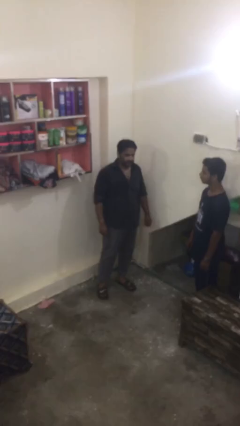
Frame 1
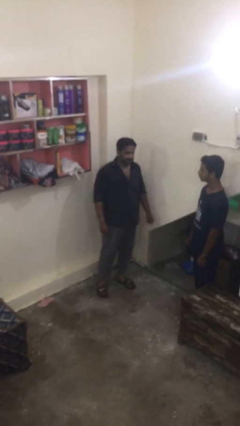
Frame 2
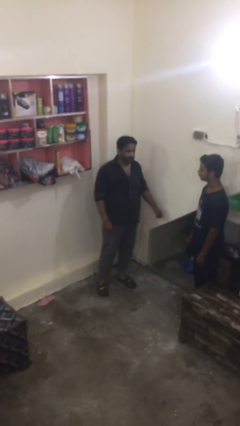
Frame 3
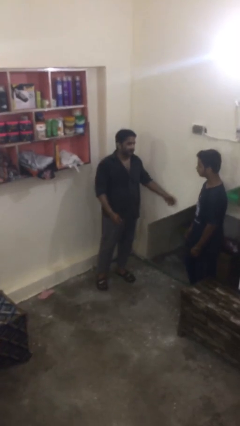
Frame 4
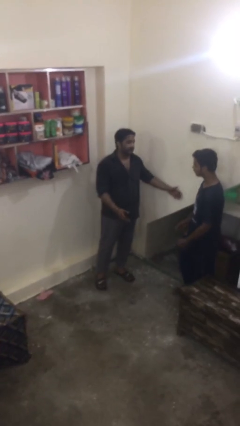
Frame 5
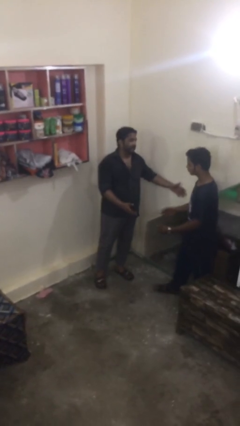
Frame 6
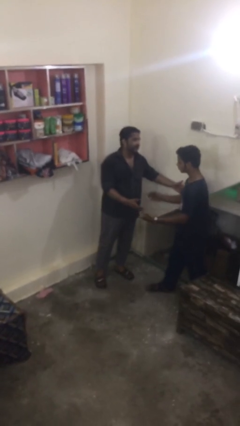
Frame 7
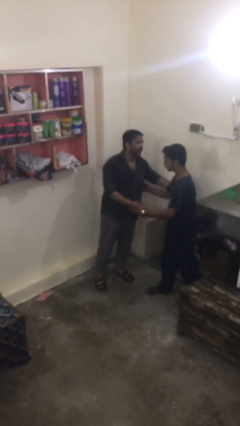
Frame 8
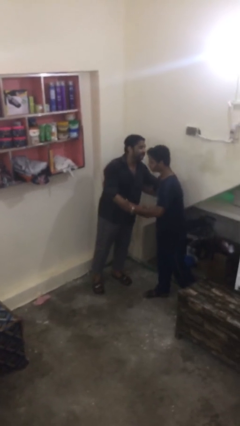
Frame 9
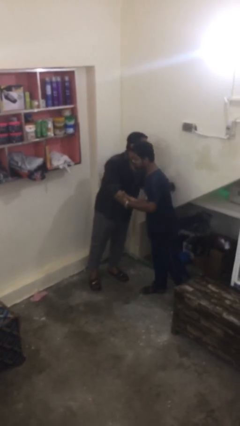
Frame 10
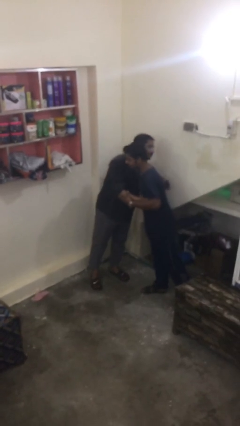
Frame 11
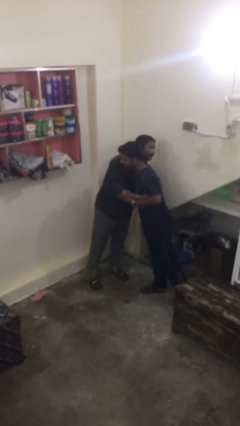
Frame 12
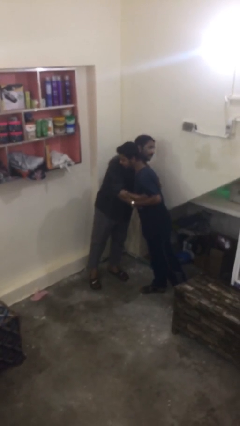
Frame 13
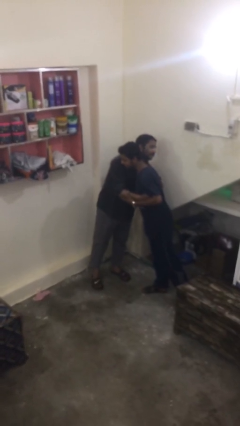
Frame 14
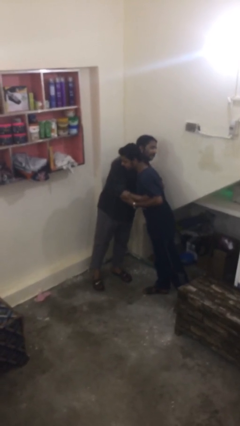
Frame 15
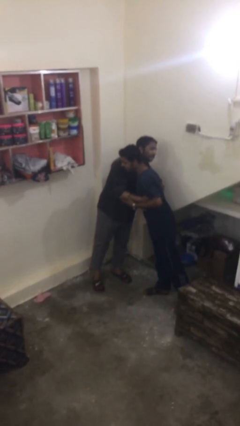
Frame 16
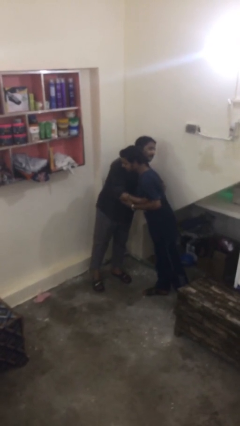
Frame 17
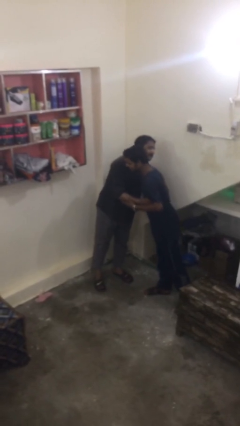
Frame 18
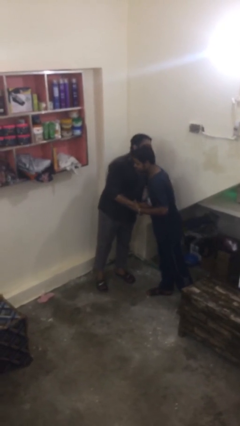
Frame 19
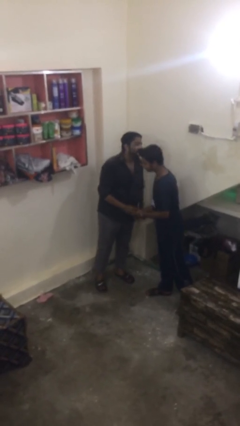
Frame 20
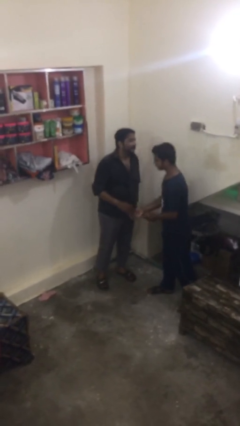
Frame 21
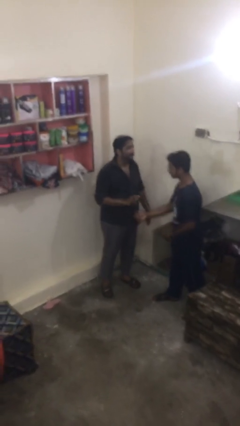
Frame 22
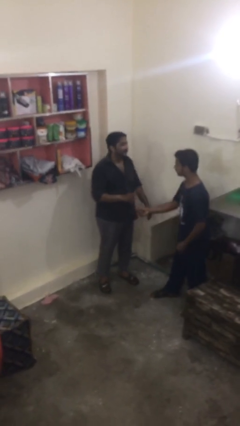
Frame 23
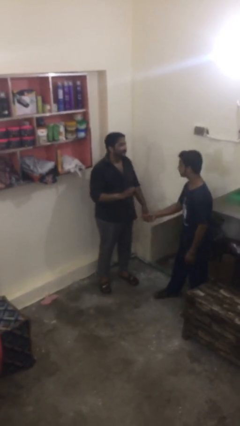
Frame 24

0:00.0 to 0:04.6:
person embraces person

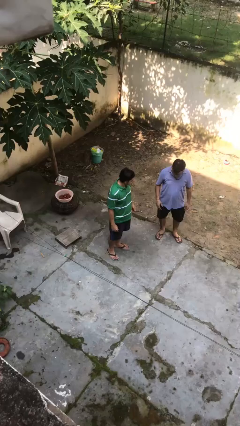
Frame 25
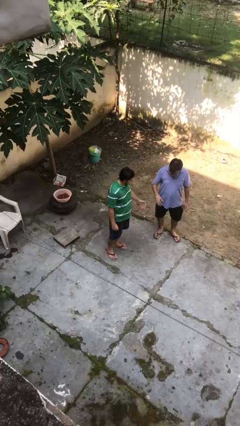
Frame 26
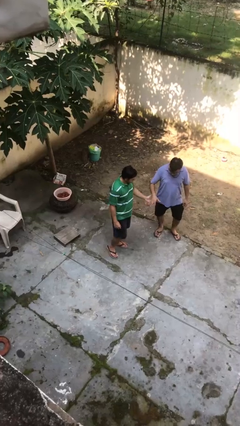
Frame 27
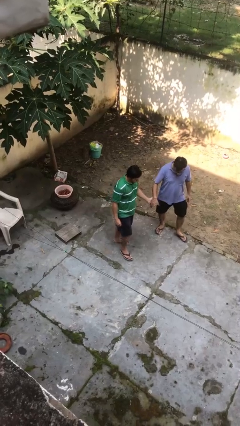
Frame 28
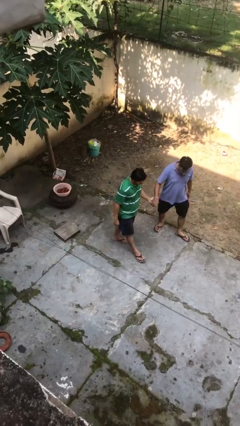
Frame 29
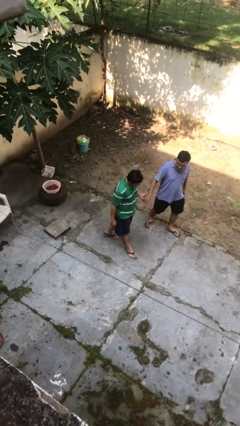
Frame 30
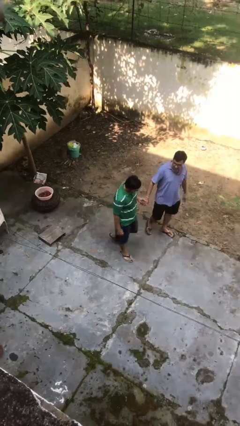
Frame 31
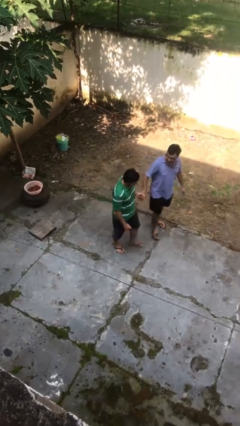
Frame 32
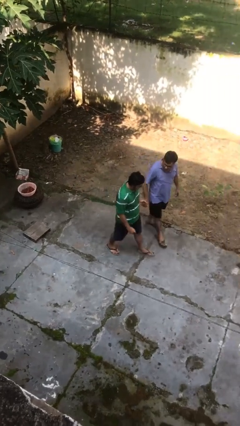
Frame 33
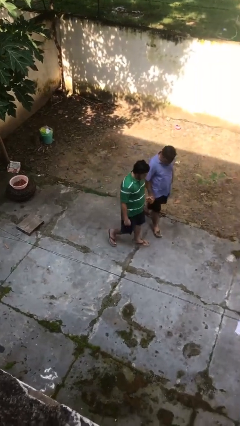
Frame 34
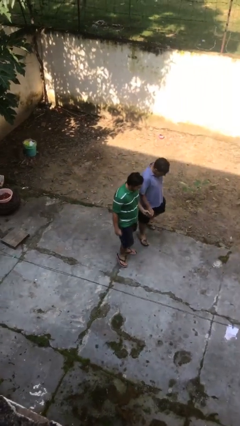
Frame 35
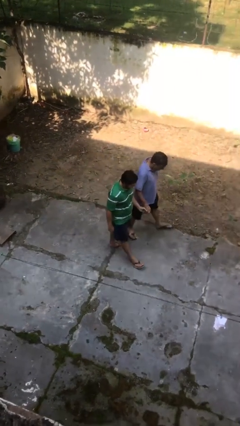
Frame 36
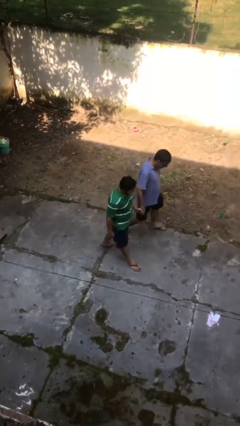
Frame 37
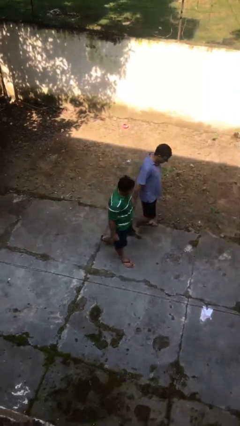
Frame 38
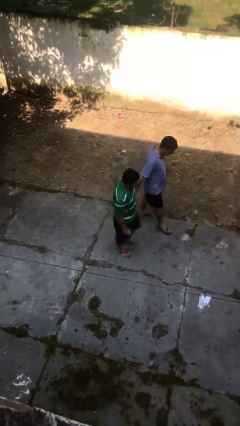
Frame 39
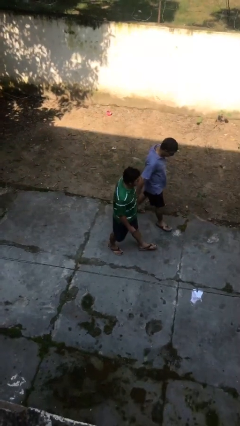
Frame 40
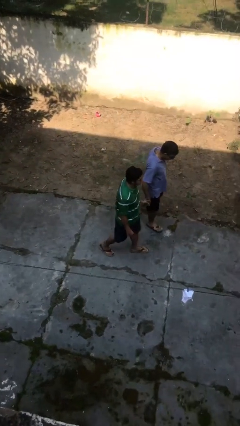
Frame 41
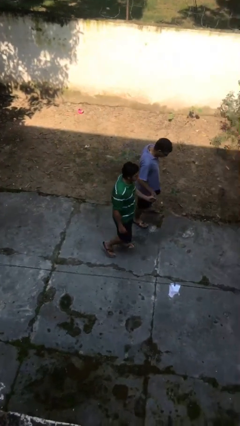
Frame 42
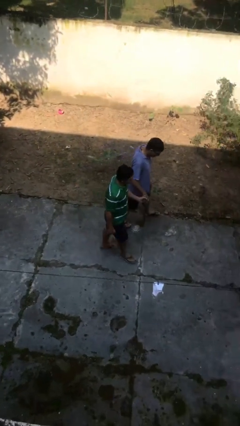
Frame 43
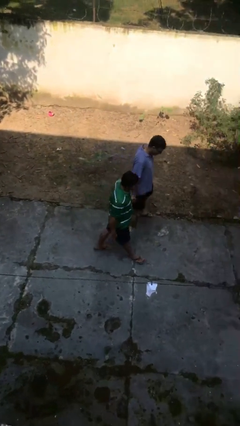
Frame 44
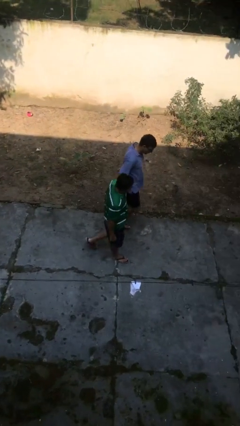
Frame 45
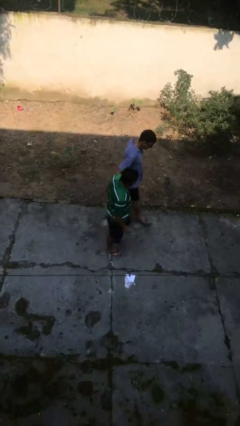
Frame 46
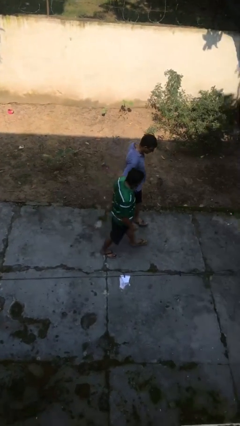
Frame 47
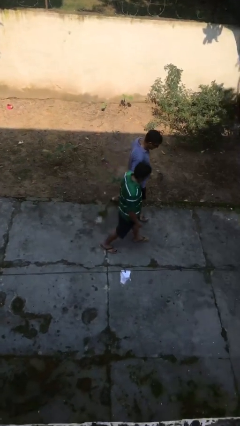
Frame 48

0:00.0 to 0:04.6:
person holds hand

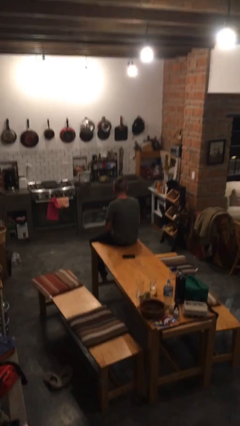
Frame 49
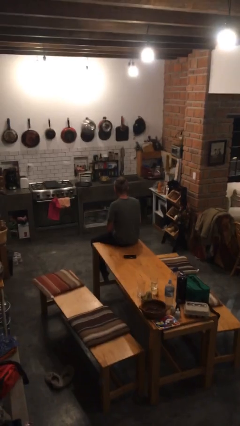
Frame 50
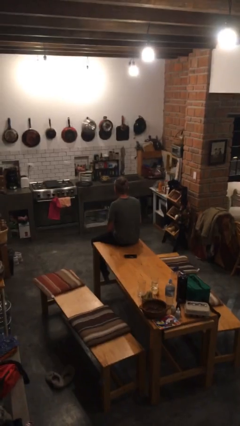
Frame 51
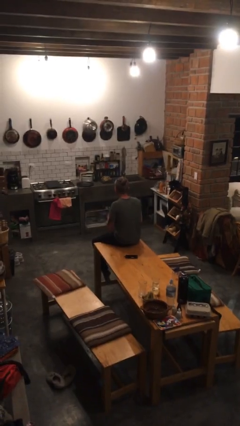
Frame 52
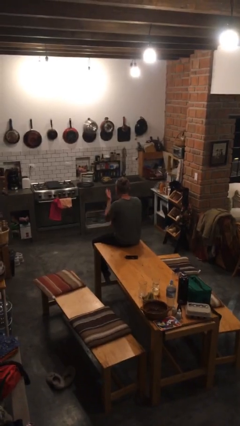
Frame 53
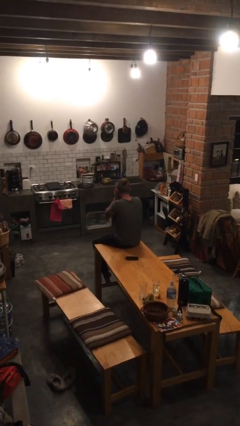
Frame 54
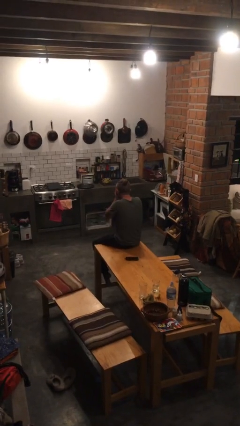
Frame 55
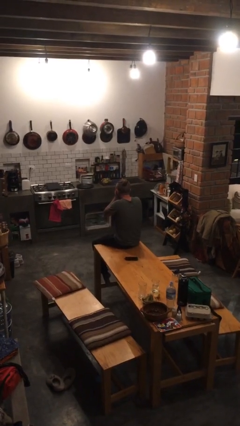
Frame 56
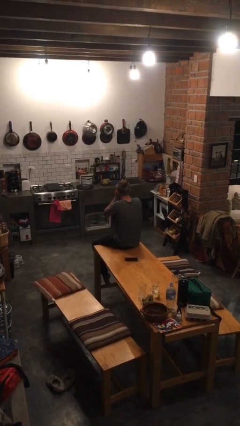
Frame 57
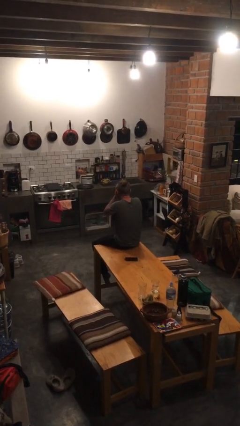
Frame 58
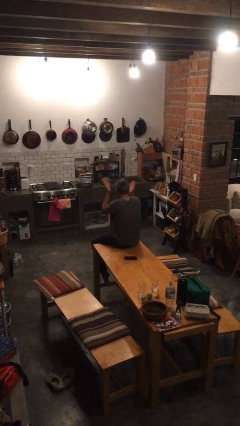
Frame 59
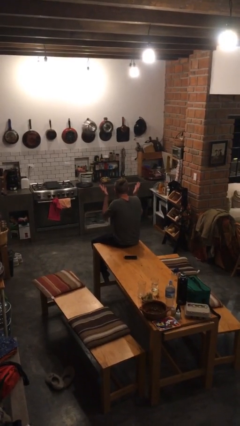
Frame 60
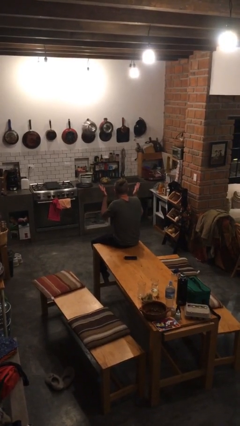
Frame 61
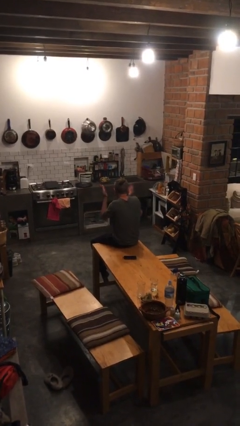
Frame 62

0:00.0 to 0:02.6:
person covers face with hands

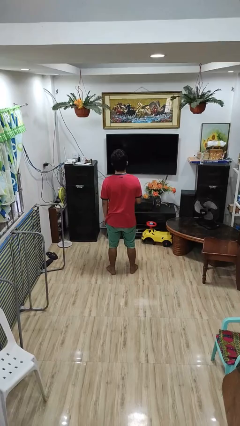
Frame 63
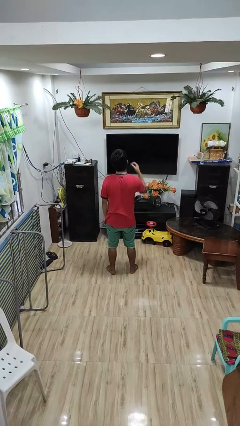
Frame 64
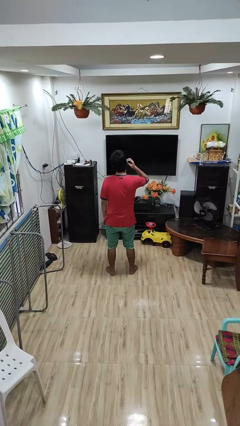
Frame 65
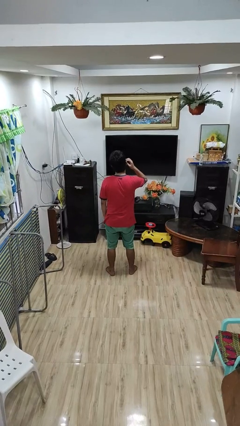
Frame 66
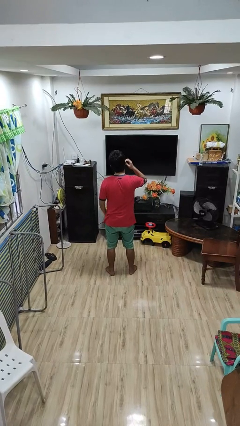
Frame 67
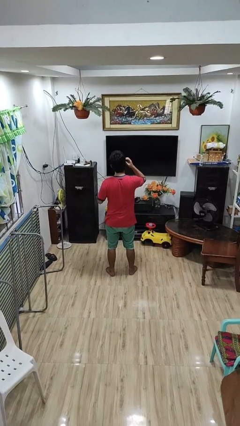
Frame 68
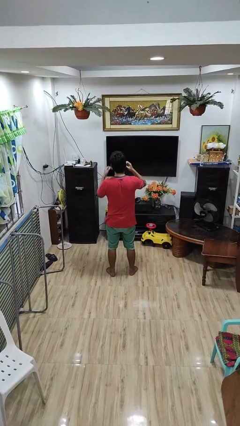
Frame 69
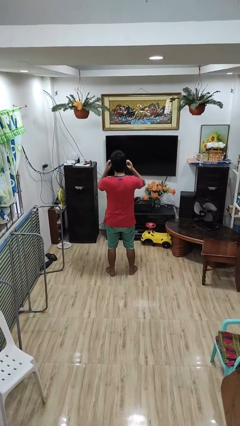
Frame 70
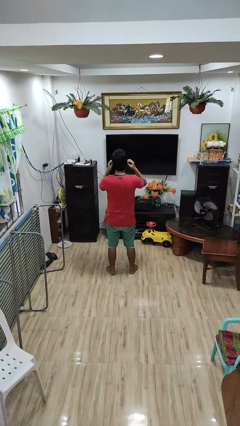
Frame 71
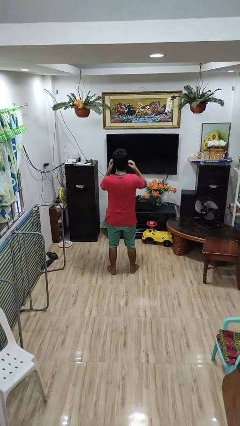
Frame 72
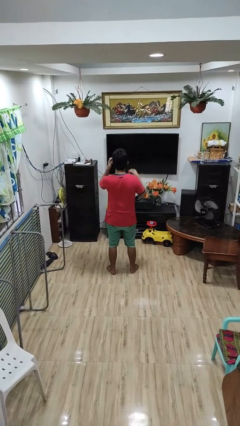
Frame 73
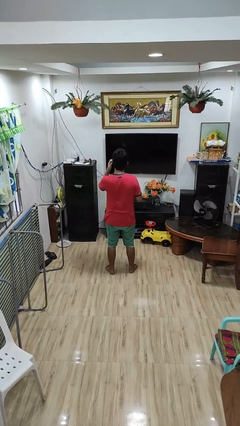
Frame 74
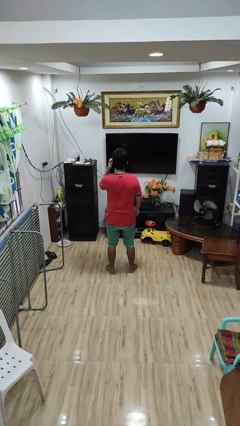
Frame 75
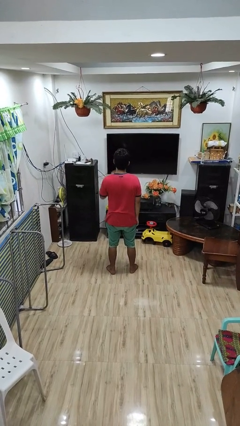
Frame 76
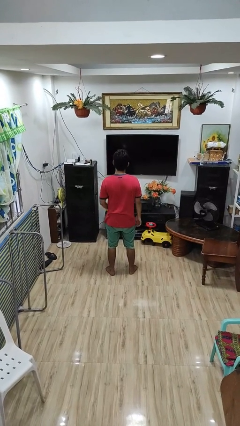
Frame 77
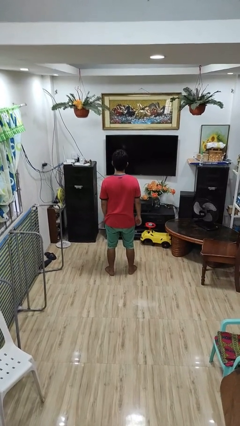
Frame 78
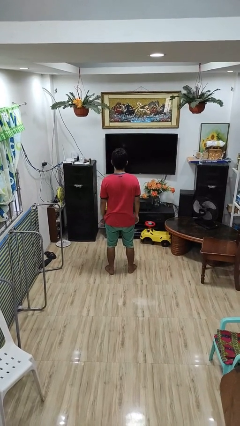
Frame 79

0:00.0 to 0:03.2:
person scratches face

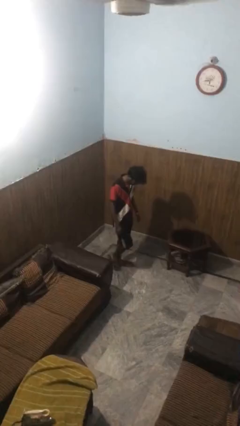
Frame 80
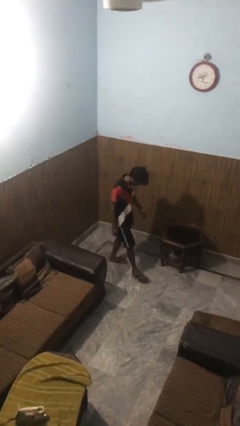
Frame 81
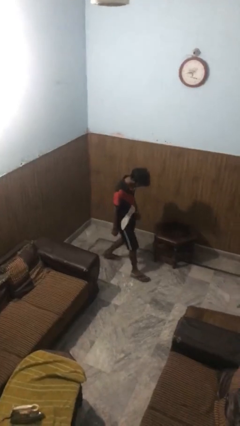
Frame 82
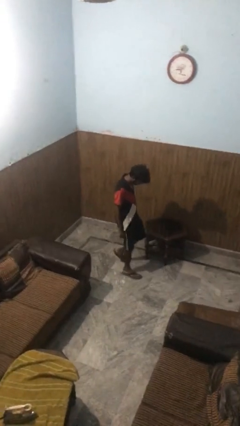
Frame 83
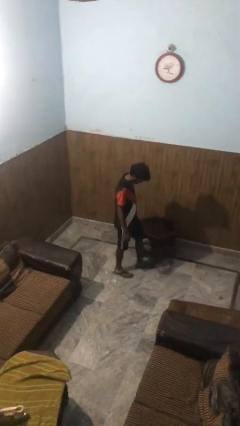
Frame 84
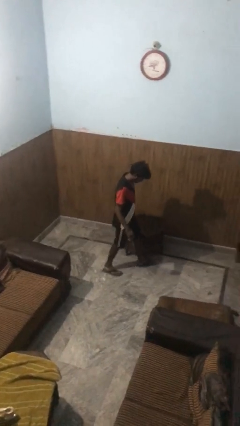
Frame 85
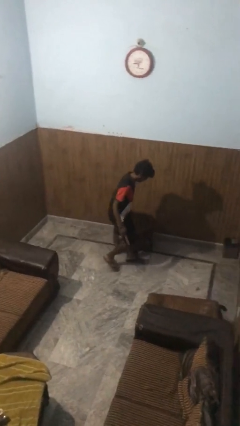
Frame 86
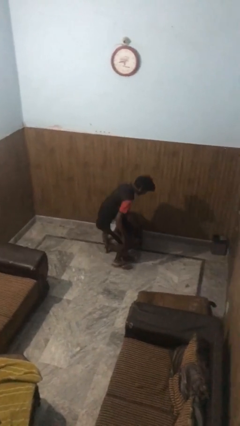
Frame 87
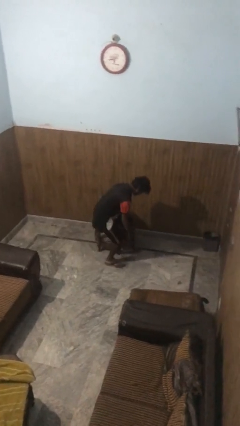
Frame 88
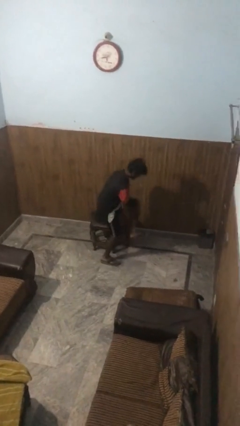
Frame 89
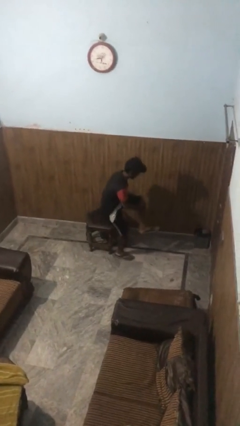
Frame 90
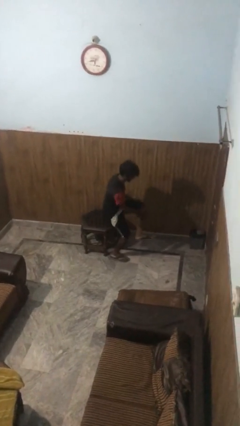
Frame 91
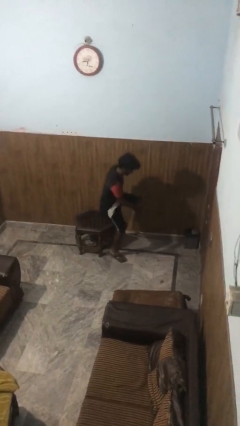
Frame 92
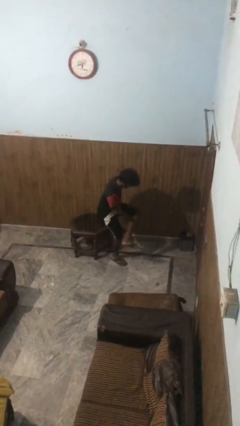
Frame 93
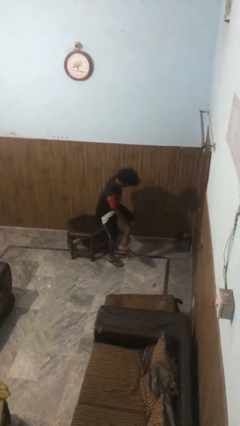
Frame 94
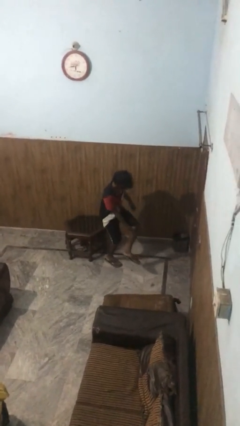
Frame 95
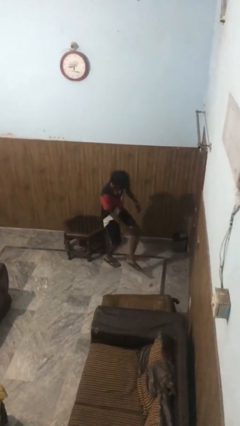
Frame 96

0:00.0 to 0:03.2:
person bumps into table
